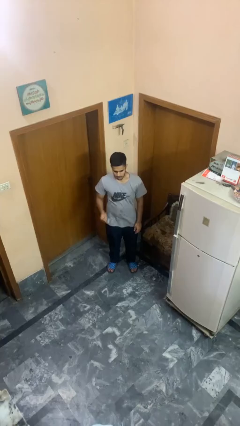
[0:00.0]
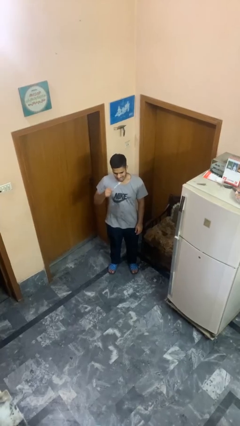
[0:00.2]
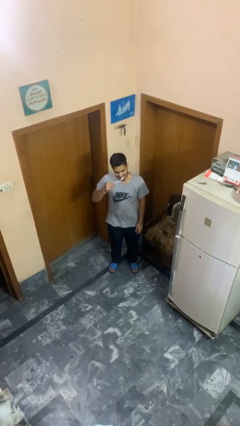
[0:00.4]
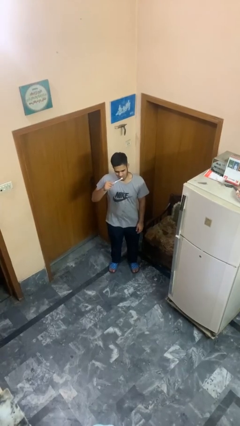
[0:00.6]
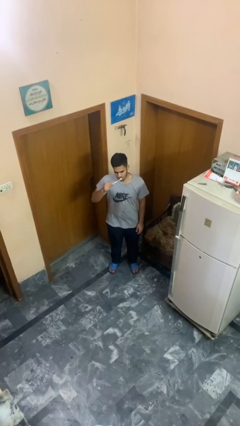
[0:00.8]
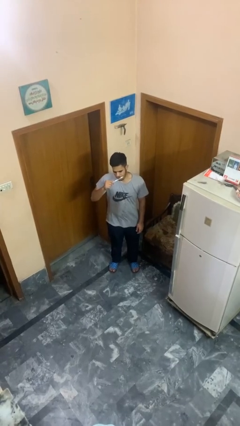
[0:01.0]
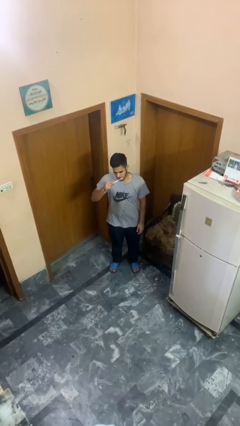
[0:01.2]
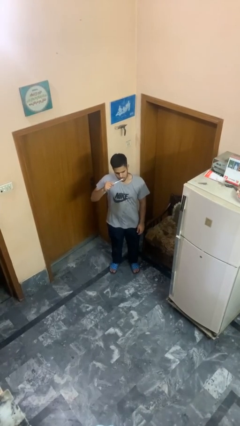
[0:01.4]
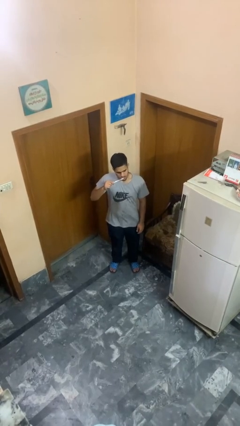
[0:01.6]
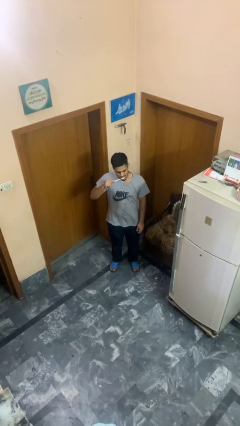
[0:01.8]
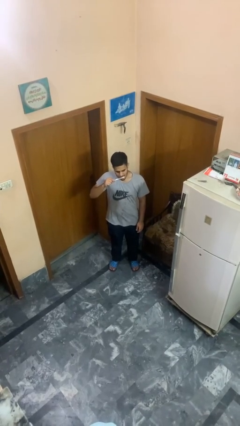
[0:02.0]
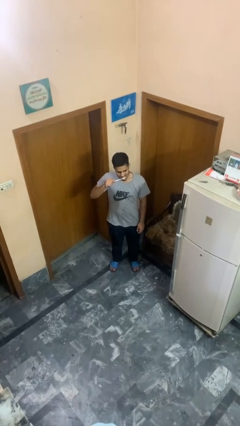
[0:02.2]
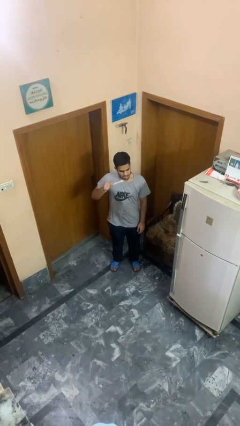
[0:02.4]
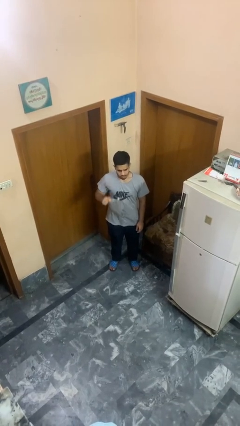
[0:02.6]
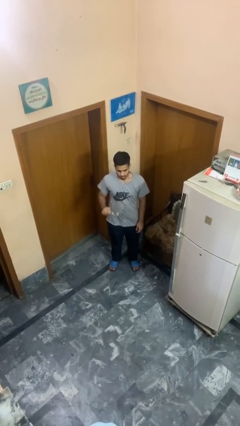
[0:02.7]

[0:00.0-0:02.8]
person brushes teeth

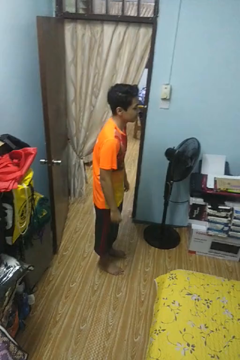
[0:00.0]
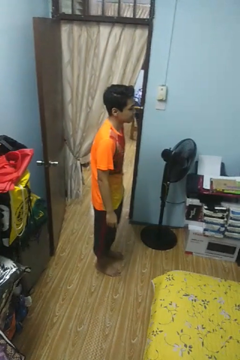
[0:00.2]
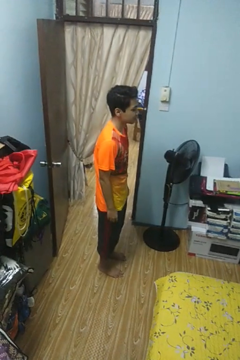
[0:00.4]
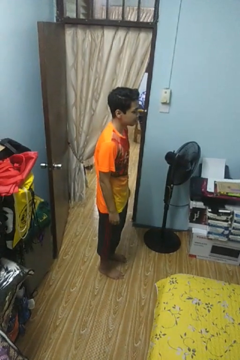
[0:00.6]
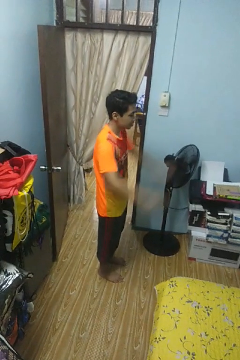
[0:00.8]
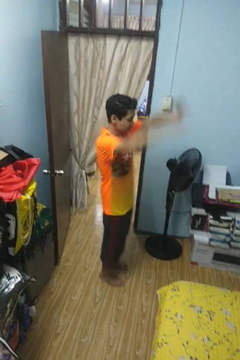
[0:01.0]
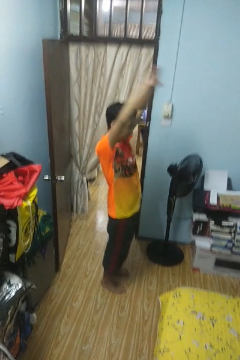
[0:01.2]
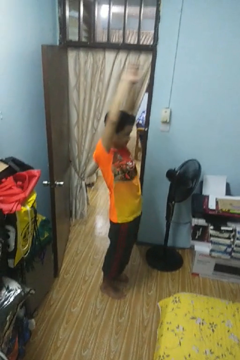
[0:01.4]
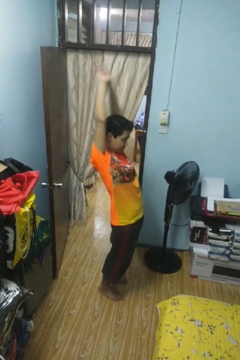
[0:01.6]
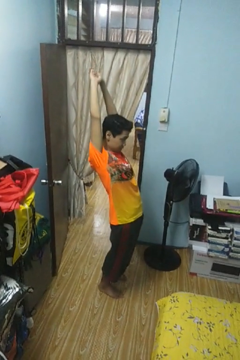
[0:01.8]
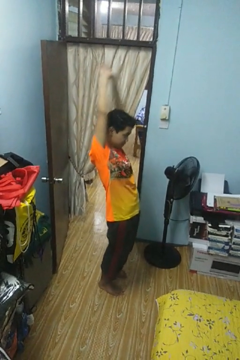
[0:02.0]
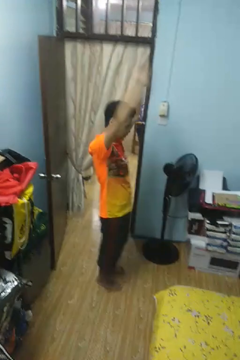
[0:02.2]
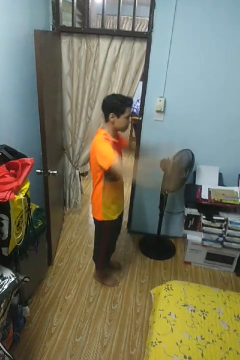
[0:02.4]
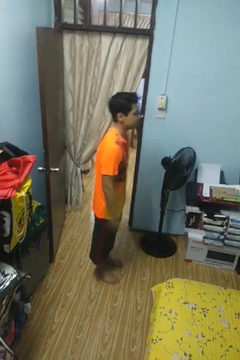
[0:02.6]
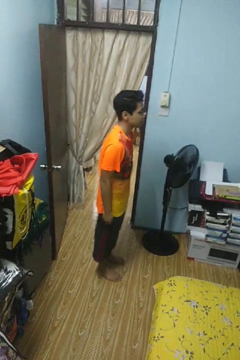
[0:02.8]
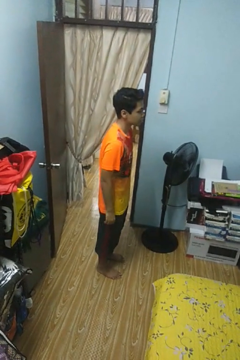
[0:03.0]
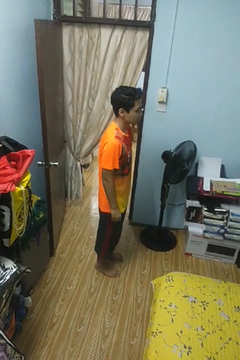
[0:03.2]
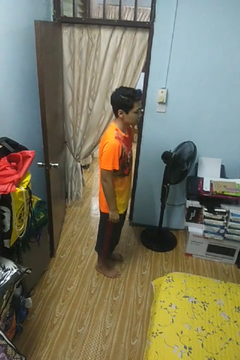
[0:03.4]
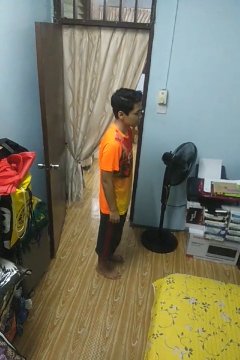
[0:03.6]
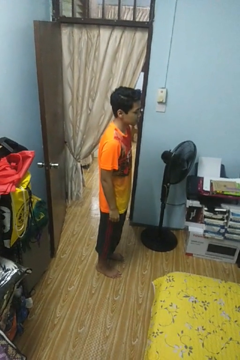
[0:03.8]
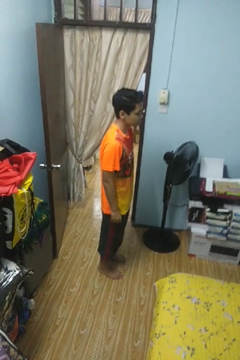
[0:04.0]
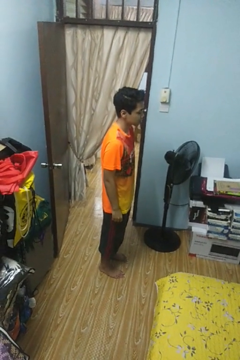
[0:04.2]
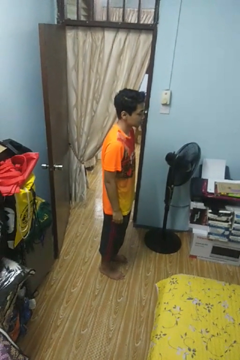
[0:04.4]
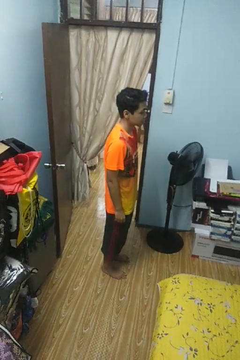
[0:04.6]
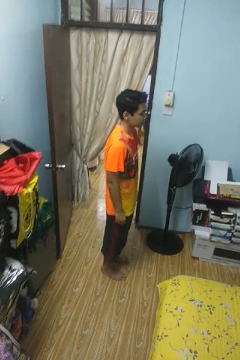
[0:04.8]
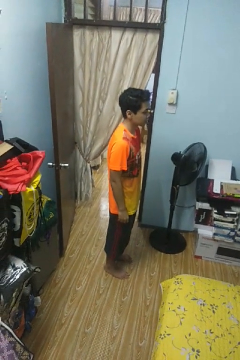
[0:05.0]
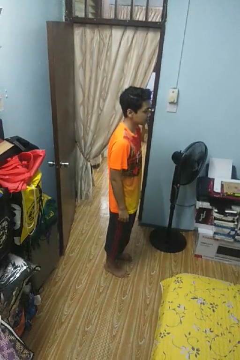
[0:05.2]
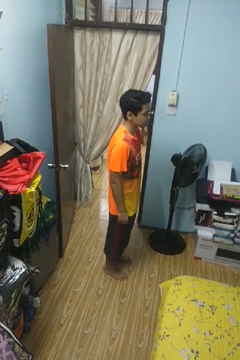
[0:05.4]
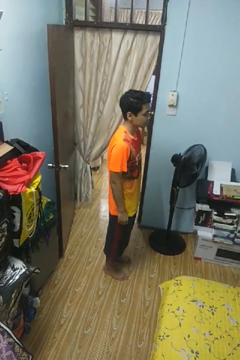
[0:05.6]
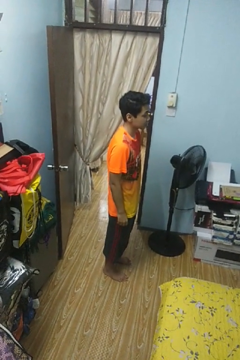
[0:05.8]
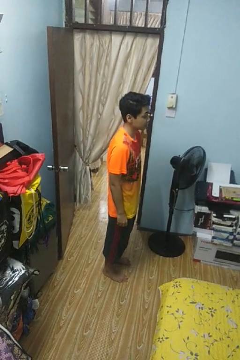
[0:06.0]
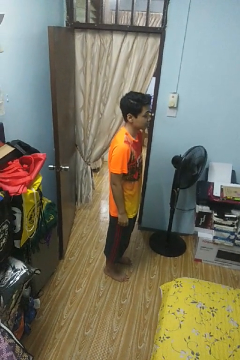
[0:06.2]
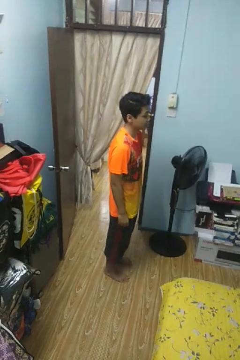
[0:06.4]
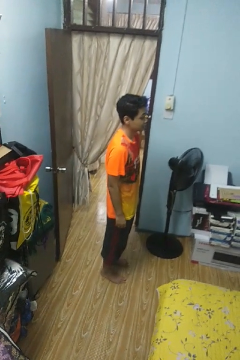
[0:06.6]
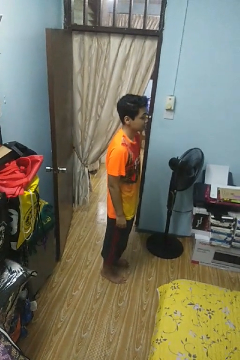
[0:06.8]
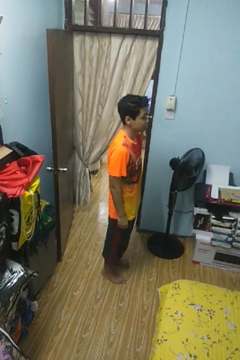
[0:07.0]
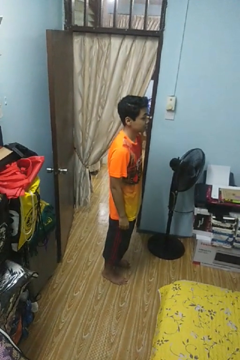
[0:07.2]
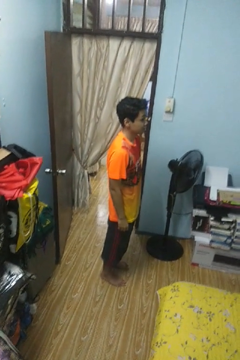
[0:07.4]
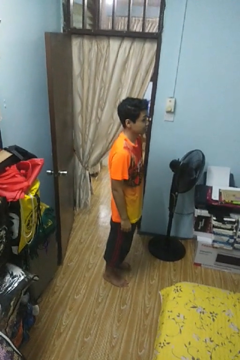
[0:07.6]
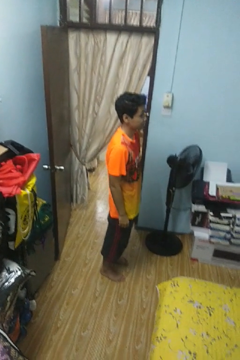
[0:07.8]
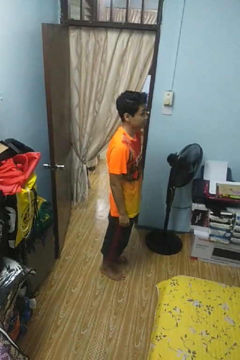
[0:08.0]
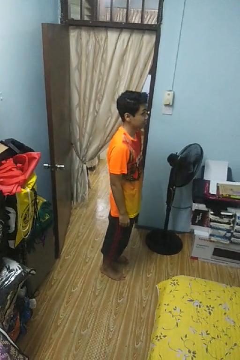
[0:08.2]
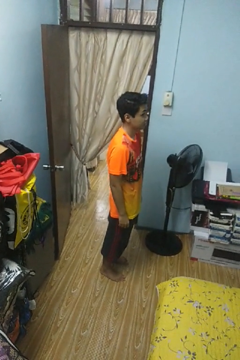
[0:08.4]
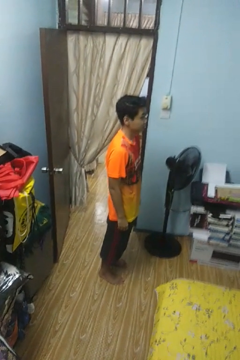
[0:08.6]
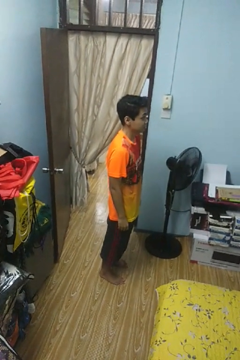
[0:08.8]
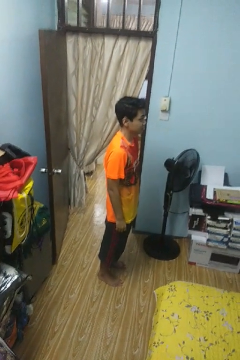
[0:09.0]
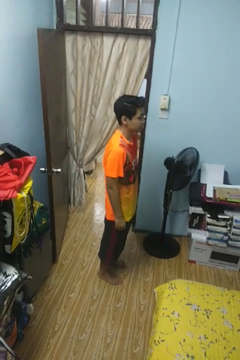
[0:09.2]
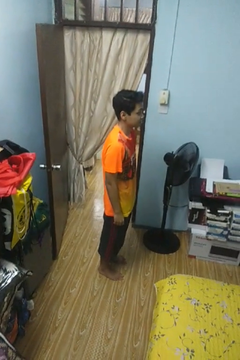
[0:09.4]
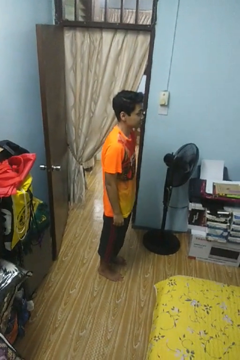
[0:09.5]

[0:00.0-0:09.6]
person stretches arms over head

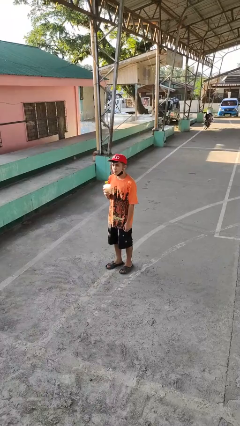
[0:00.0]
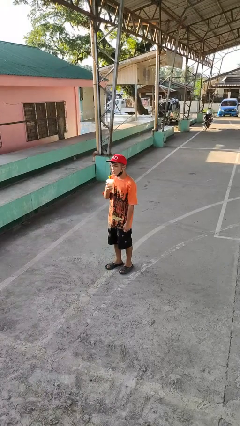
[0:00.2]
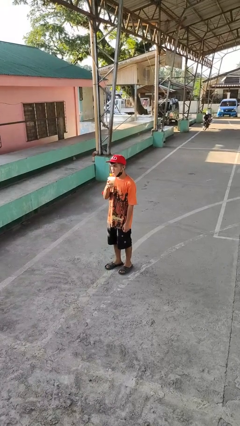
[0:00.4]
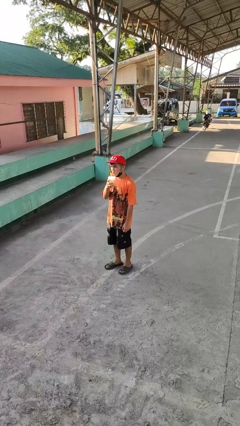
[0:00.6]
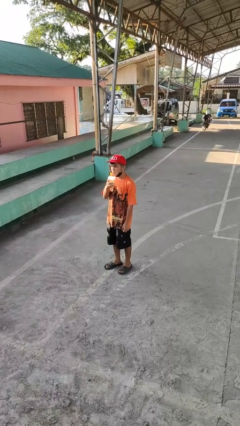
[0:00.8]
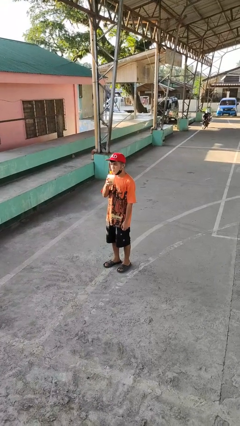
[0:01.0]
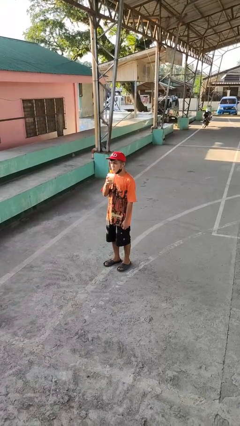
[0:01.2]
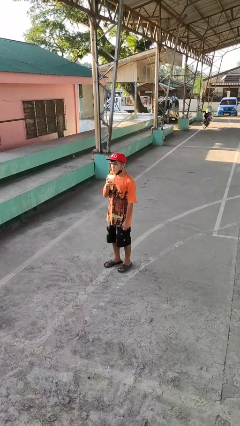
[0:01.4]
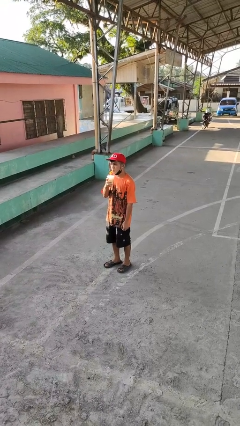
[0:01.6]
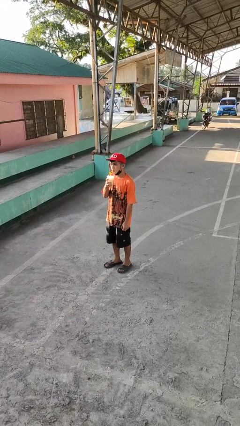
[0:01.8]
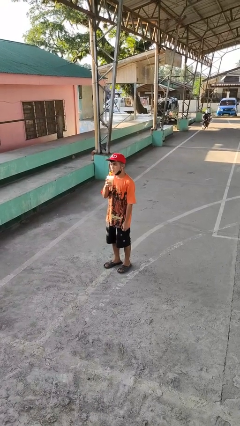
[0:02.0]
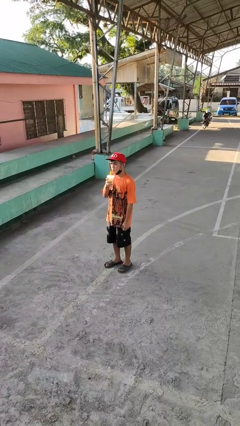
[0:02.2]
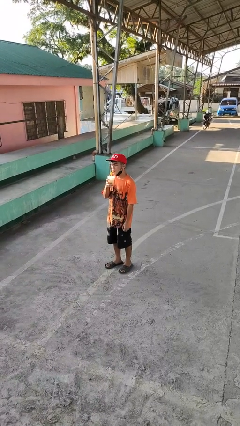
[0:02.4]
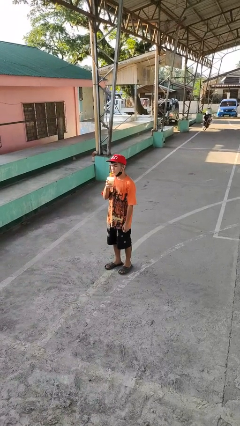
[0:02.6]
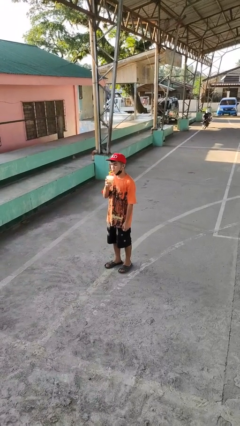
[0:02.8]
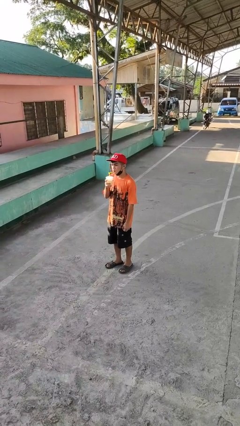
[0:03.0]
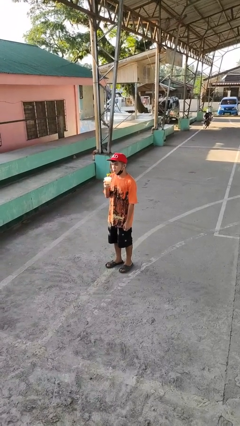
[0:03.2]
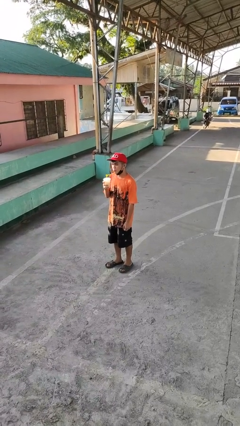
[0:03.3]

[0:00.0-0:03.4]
person drinks from straw

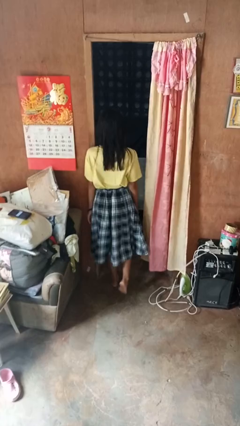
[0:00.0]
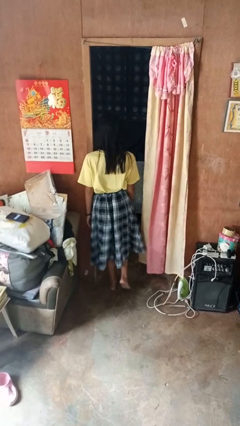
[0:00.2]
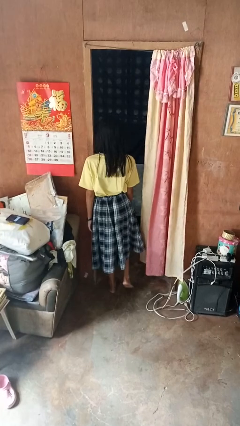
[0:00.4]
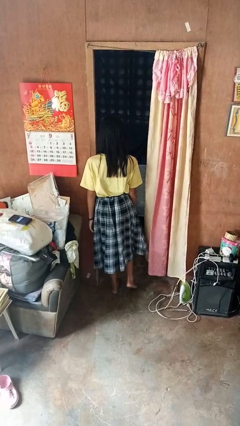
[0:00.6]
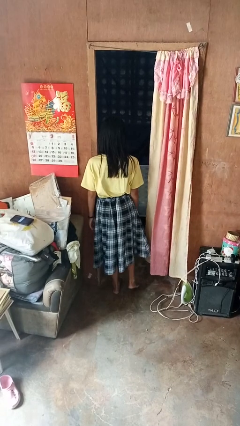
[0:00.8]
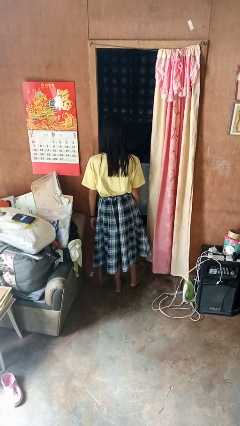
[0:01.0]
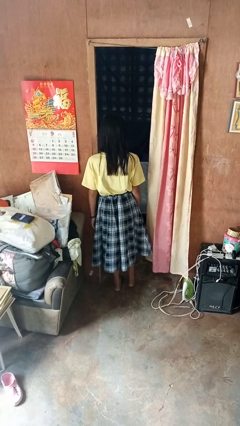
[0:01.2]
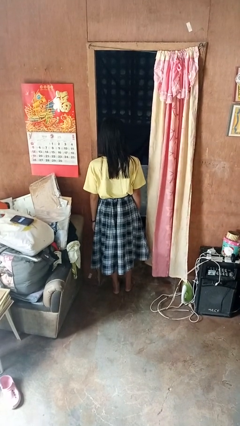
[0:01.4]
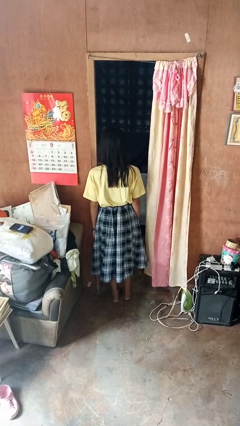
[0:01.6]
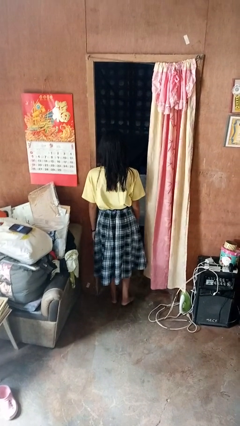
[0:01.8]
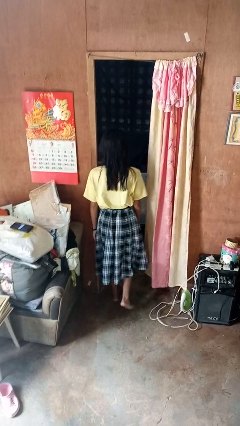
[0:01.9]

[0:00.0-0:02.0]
person bumps into wall

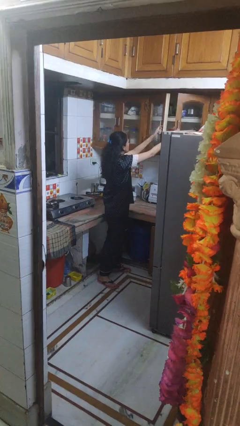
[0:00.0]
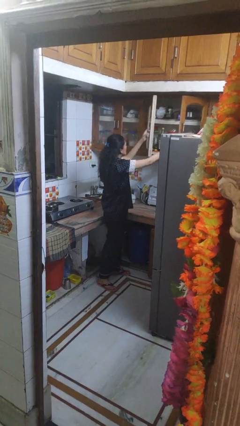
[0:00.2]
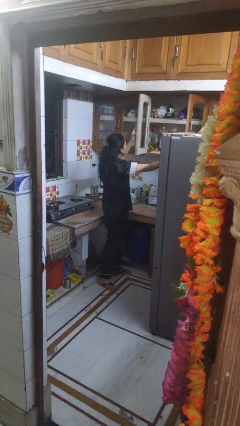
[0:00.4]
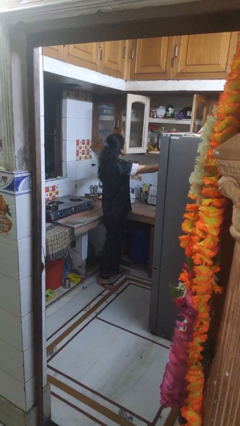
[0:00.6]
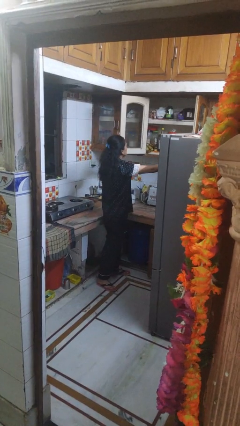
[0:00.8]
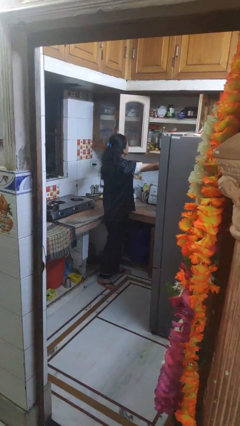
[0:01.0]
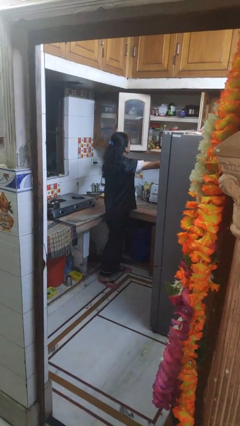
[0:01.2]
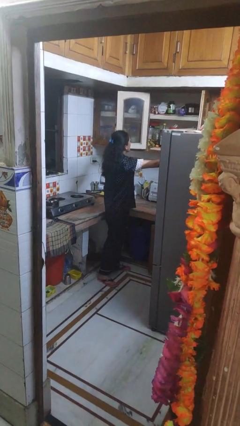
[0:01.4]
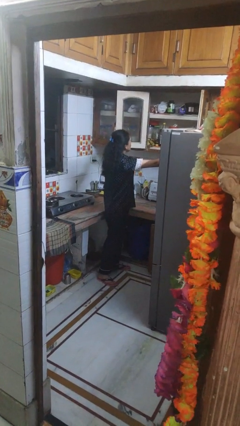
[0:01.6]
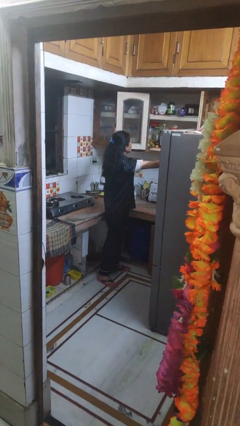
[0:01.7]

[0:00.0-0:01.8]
person opens cabinet
